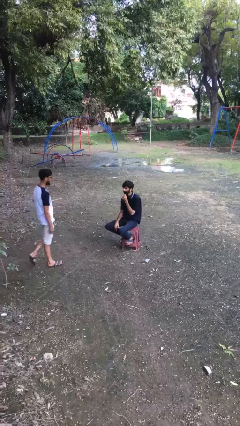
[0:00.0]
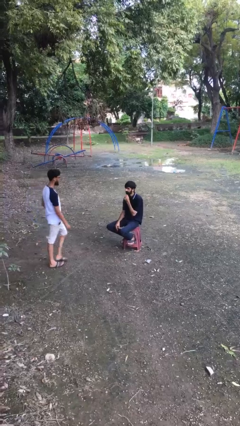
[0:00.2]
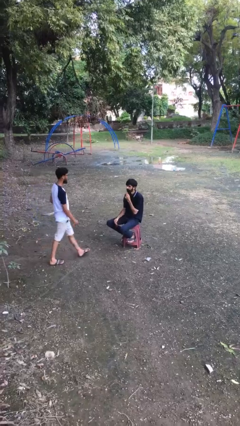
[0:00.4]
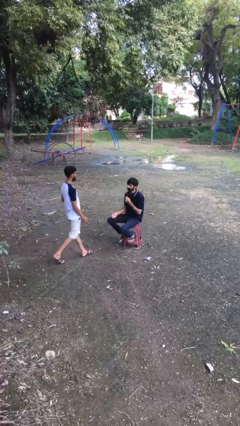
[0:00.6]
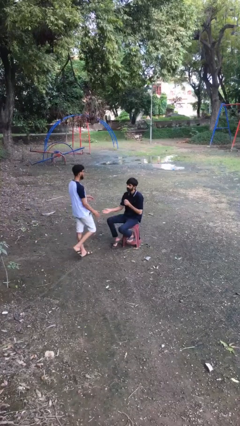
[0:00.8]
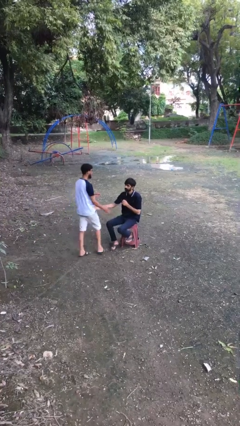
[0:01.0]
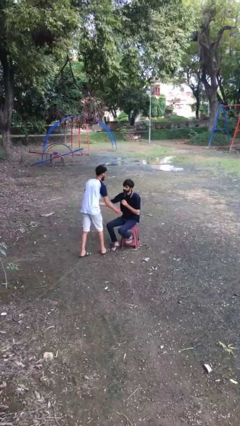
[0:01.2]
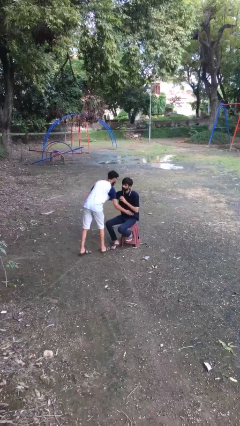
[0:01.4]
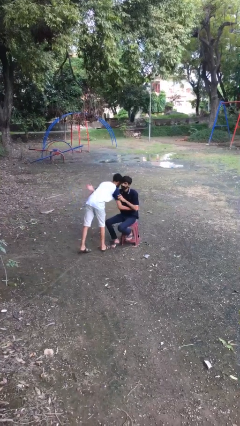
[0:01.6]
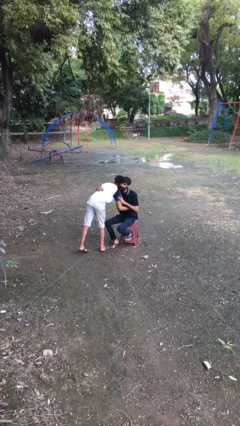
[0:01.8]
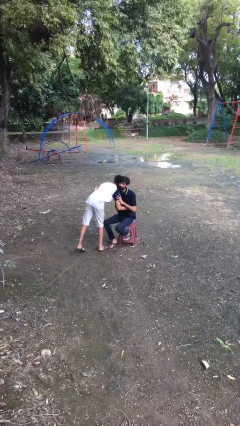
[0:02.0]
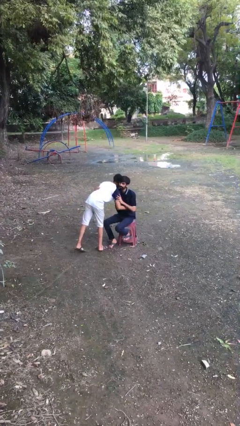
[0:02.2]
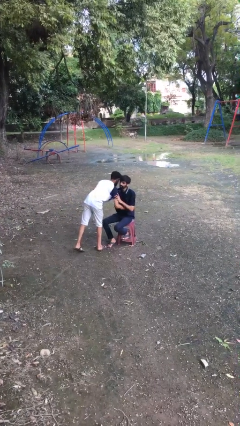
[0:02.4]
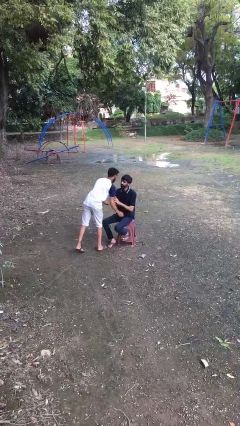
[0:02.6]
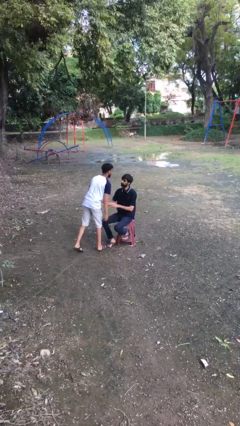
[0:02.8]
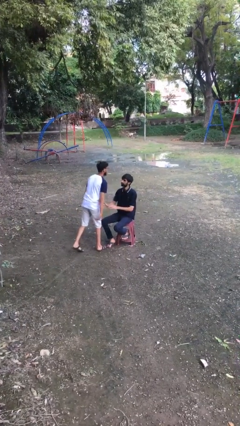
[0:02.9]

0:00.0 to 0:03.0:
person embraces person

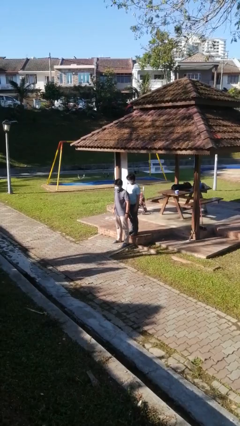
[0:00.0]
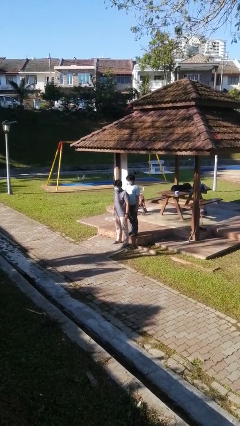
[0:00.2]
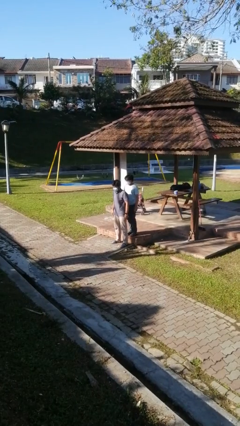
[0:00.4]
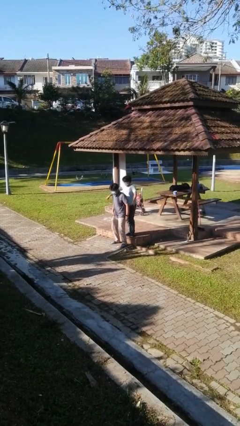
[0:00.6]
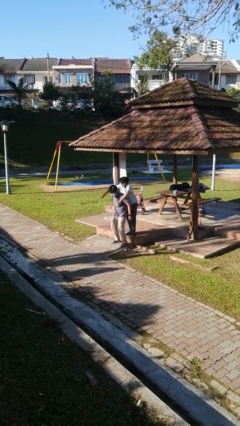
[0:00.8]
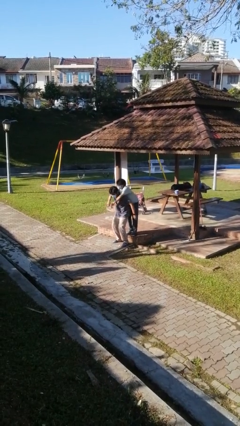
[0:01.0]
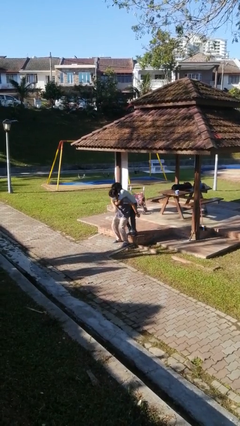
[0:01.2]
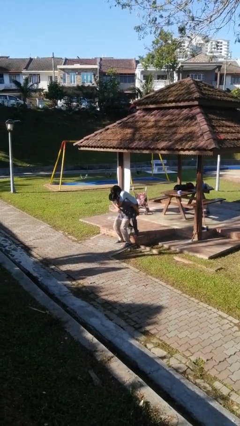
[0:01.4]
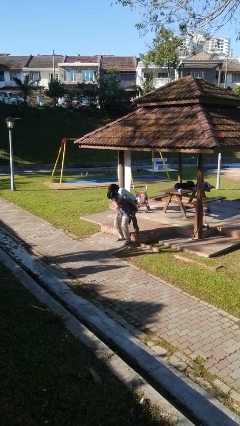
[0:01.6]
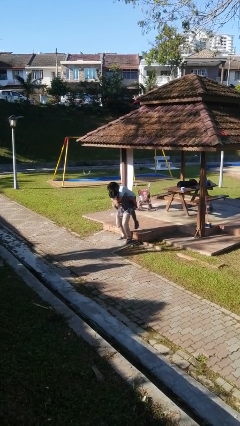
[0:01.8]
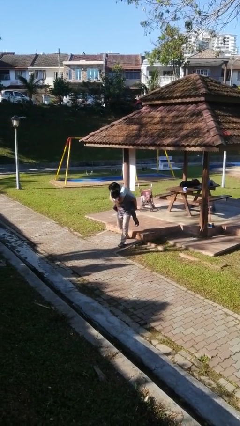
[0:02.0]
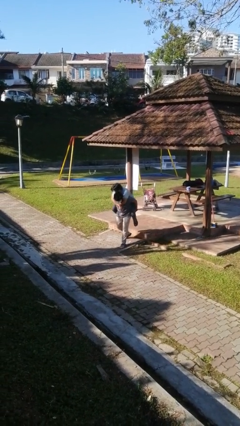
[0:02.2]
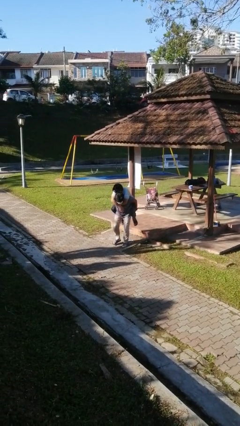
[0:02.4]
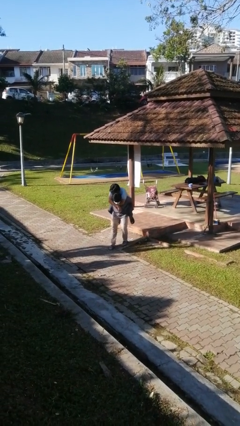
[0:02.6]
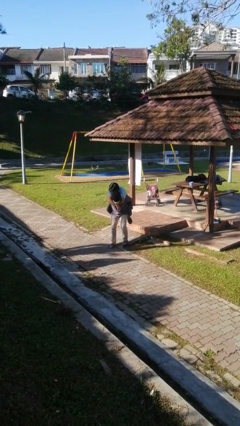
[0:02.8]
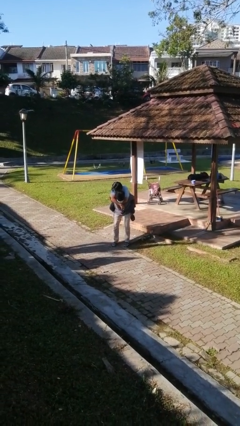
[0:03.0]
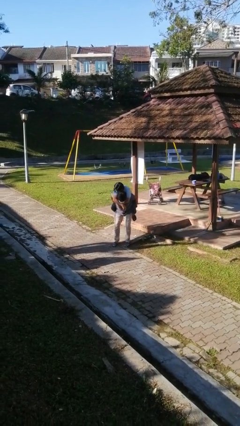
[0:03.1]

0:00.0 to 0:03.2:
person carries person over shoulder

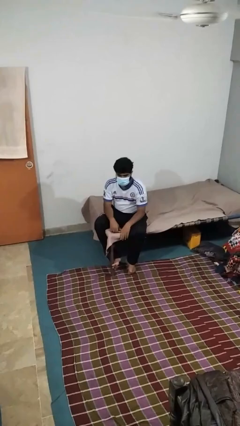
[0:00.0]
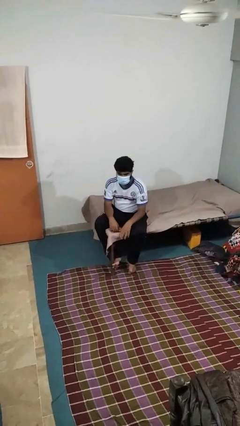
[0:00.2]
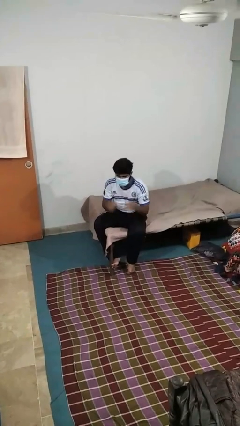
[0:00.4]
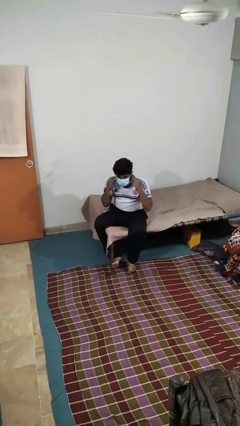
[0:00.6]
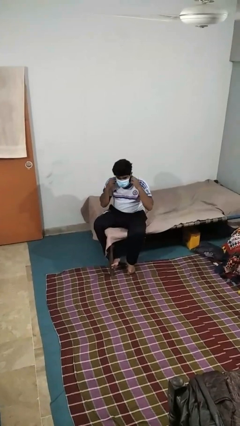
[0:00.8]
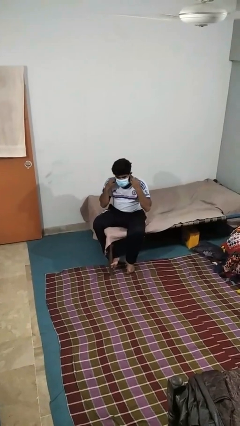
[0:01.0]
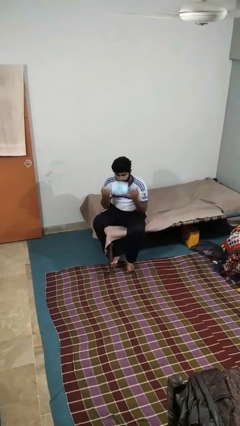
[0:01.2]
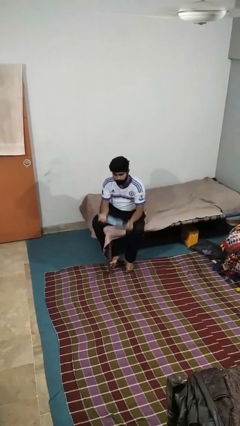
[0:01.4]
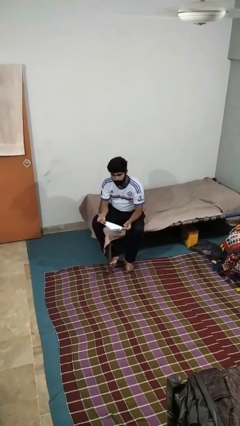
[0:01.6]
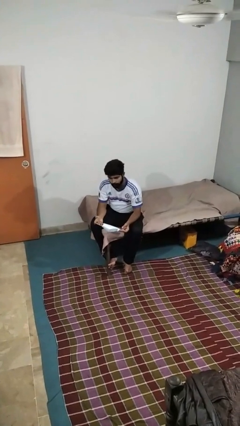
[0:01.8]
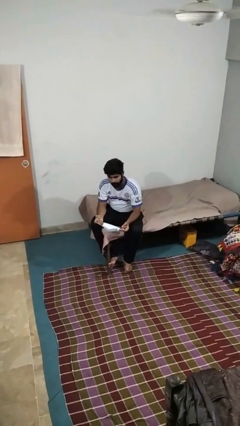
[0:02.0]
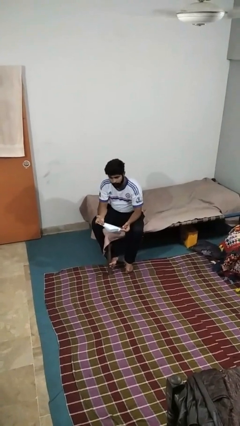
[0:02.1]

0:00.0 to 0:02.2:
person takes off facemask

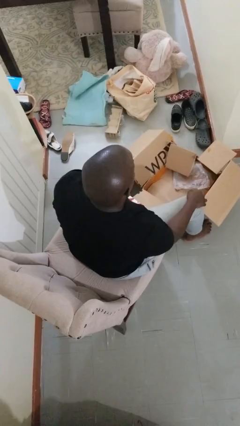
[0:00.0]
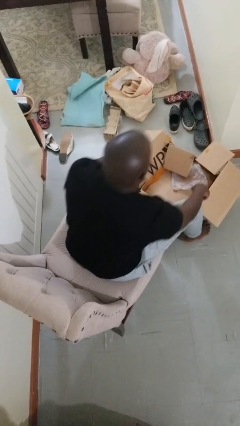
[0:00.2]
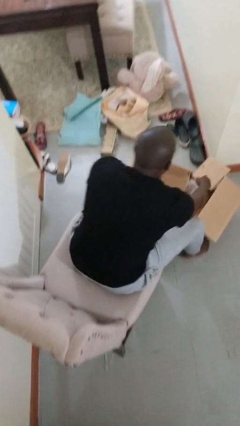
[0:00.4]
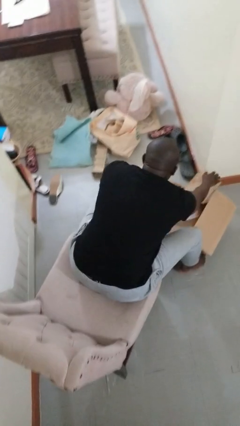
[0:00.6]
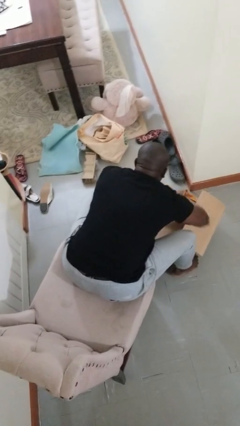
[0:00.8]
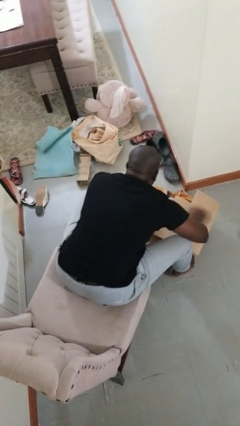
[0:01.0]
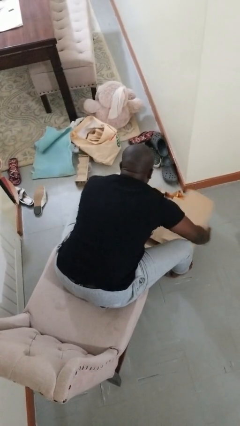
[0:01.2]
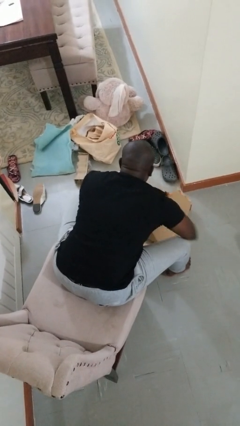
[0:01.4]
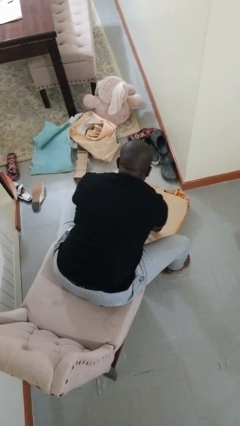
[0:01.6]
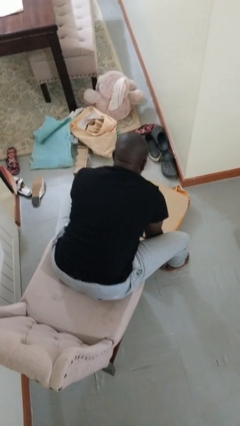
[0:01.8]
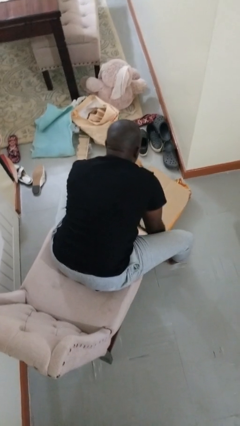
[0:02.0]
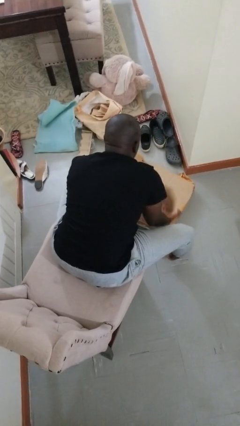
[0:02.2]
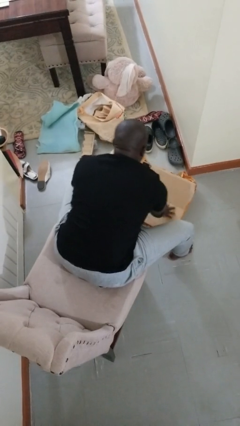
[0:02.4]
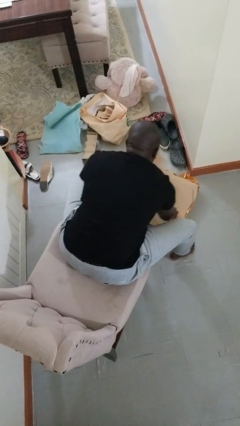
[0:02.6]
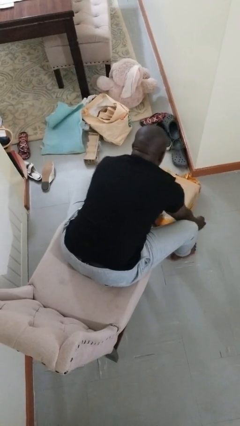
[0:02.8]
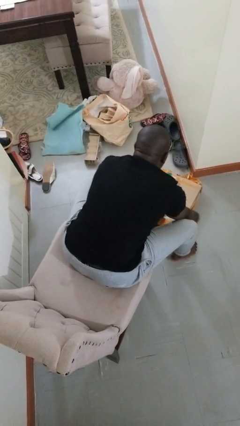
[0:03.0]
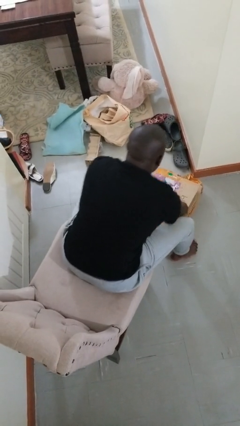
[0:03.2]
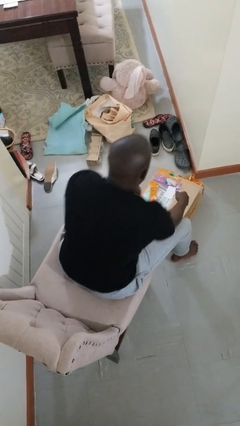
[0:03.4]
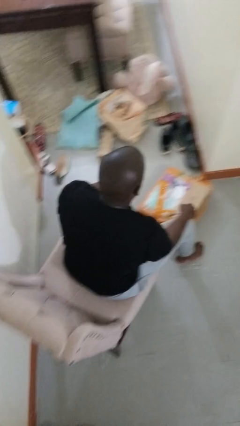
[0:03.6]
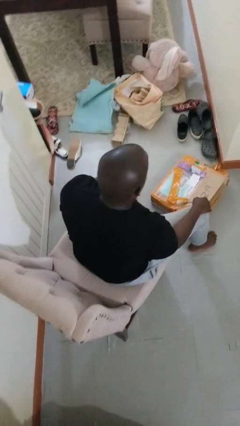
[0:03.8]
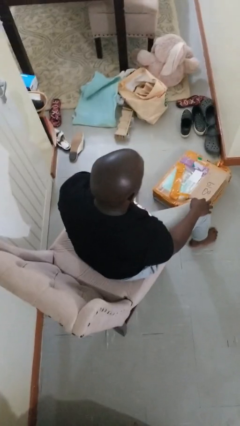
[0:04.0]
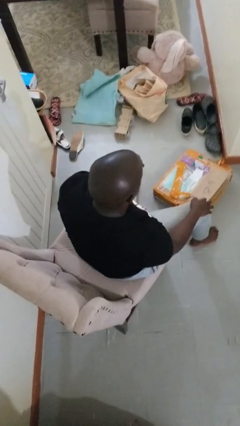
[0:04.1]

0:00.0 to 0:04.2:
person closes box

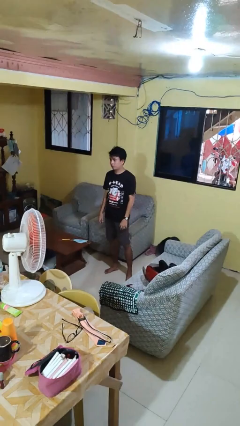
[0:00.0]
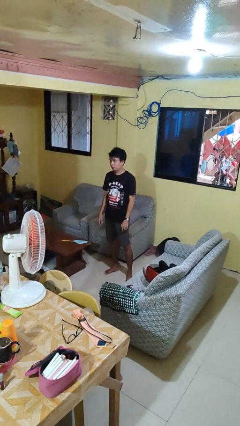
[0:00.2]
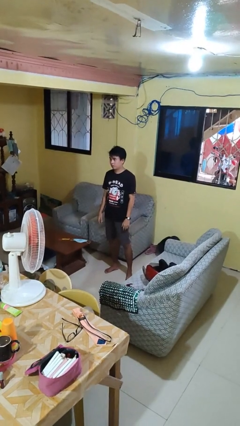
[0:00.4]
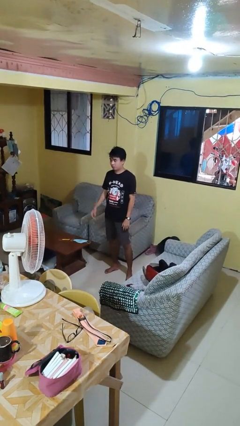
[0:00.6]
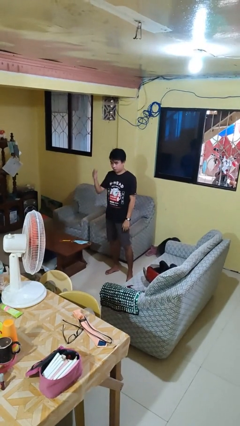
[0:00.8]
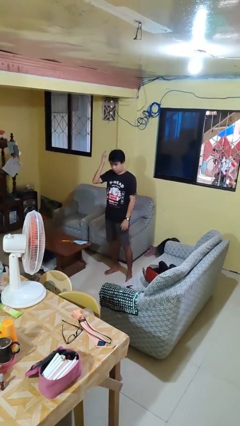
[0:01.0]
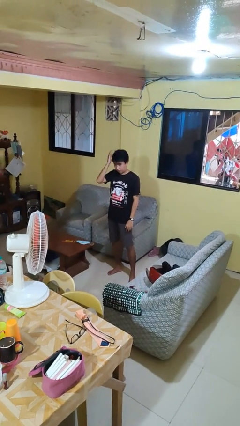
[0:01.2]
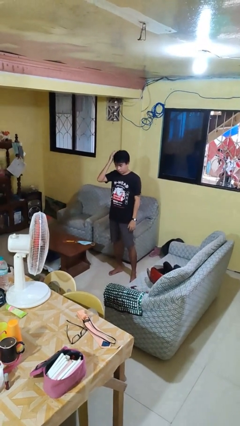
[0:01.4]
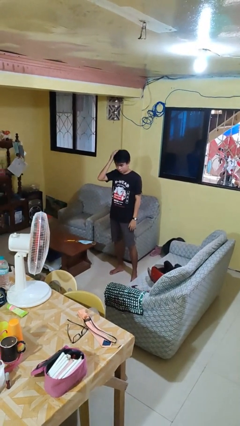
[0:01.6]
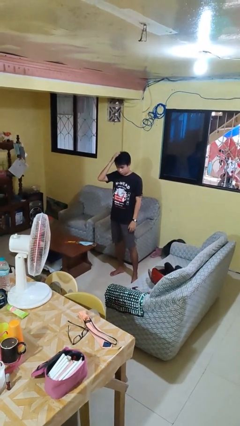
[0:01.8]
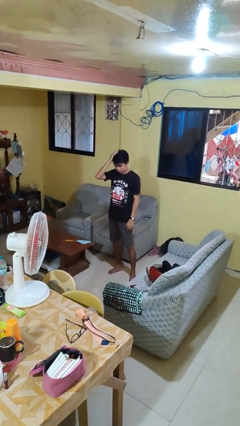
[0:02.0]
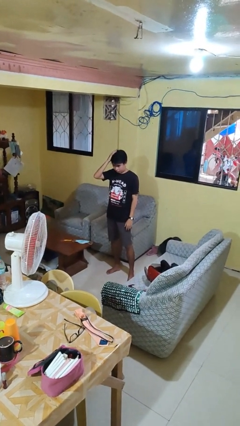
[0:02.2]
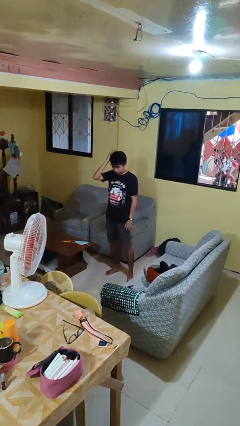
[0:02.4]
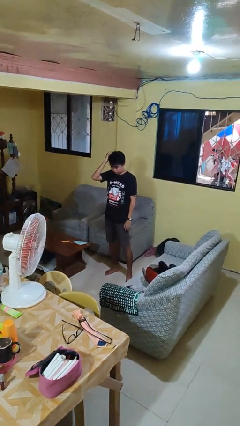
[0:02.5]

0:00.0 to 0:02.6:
person pats head

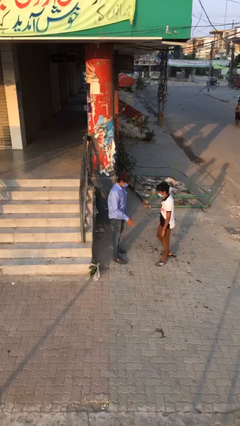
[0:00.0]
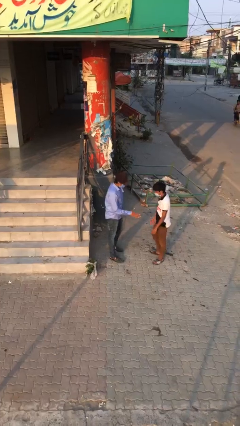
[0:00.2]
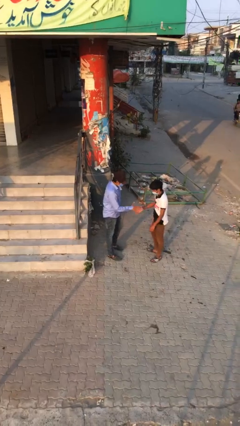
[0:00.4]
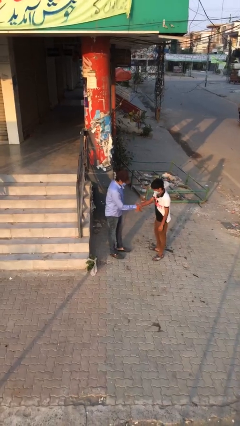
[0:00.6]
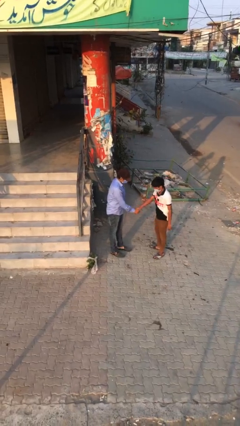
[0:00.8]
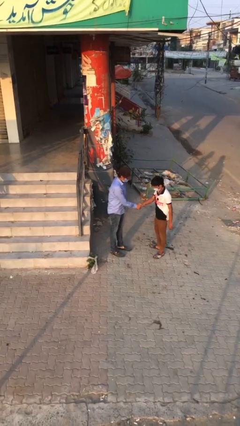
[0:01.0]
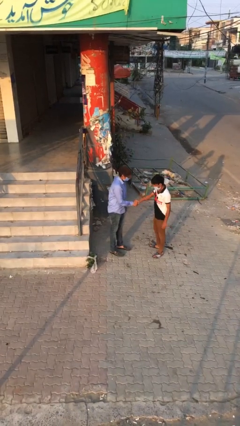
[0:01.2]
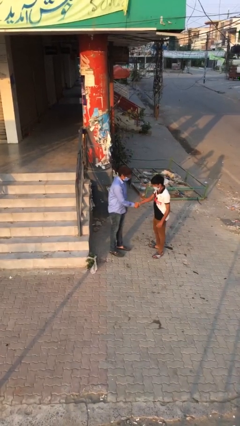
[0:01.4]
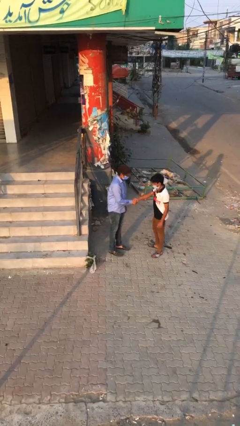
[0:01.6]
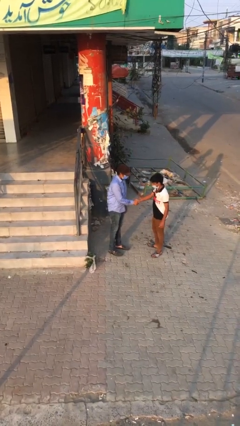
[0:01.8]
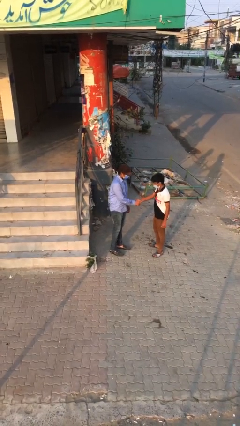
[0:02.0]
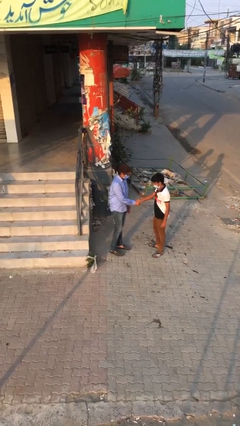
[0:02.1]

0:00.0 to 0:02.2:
person shakes hand
